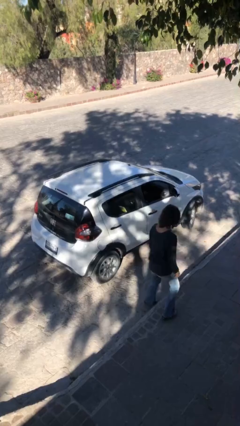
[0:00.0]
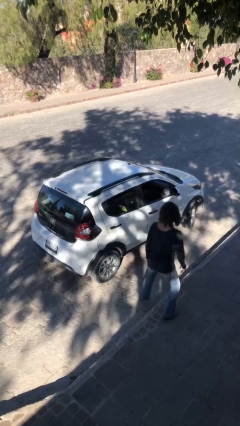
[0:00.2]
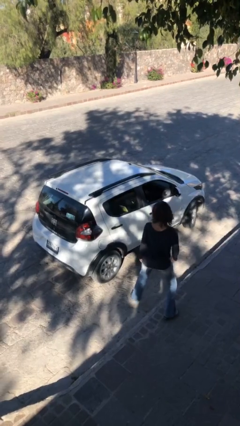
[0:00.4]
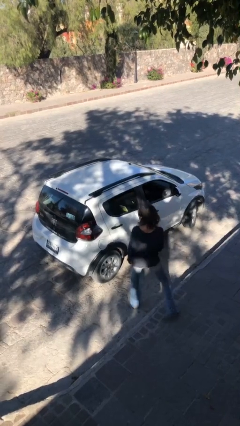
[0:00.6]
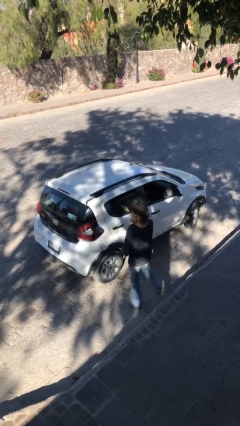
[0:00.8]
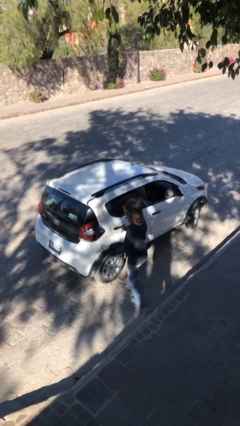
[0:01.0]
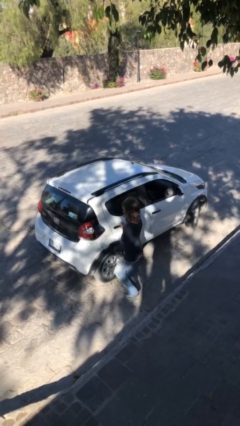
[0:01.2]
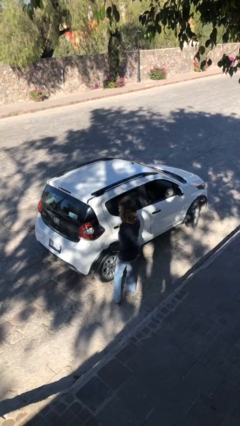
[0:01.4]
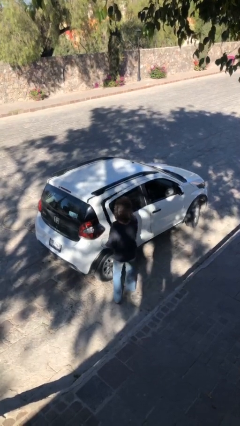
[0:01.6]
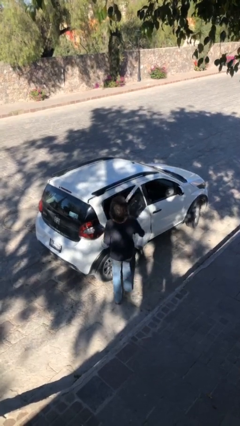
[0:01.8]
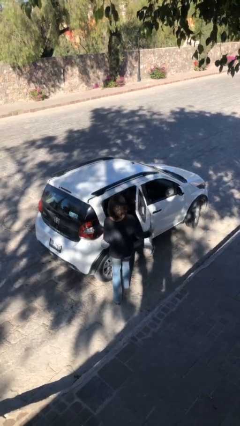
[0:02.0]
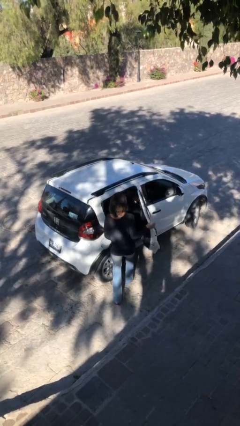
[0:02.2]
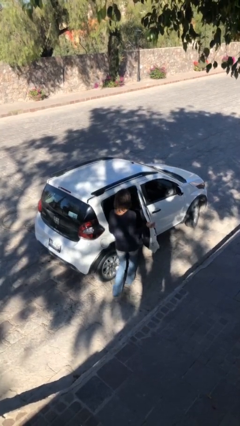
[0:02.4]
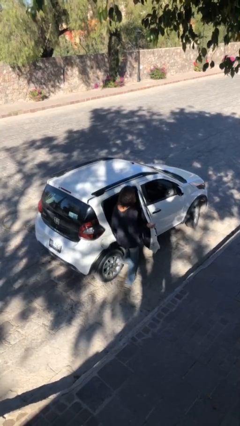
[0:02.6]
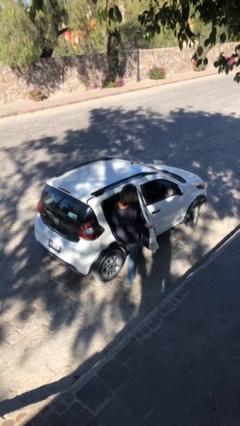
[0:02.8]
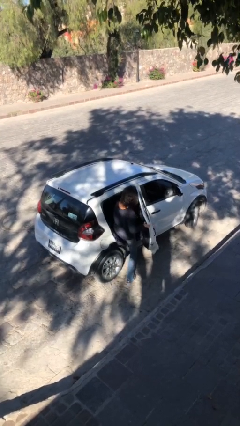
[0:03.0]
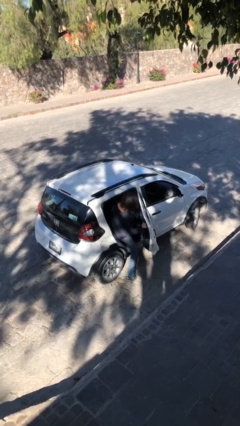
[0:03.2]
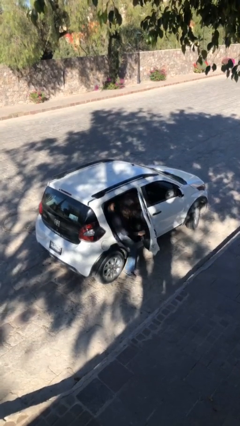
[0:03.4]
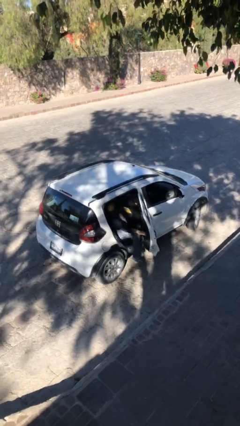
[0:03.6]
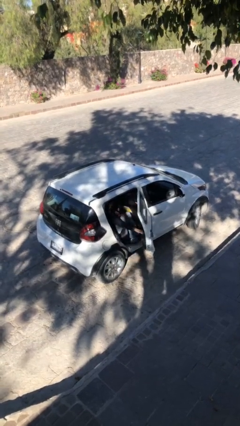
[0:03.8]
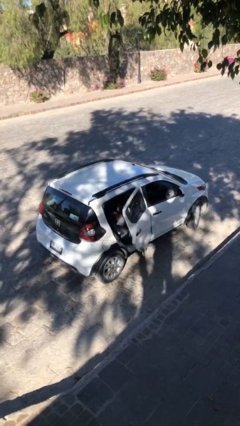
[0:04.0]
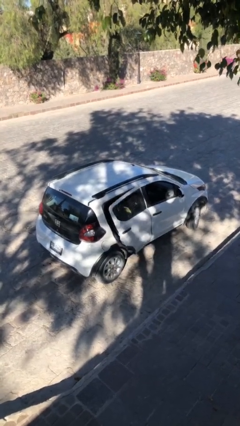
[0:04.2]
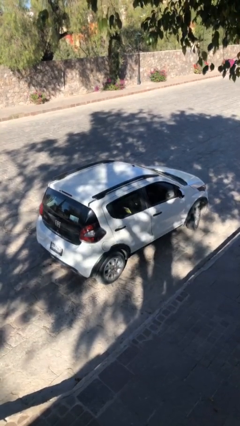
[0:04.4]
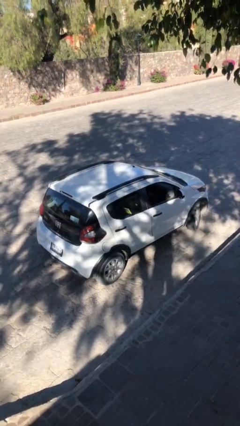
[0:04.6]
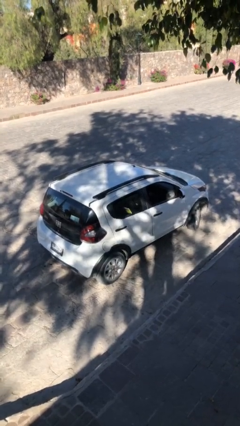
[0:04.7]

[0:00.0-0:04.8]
car picks up person

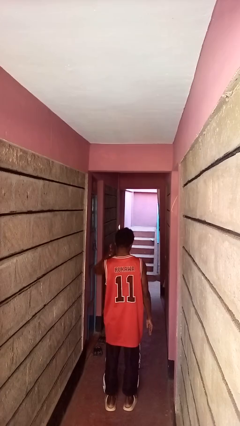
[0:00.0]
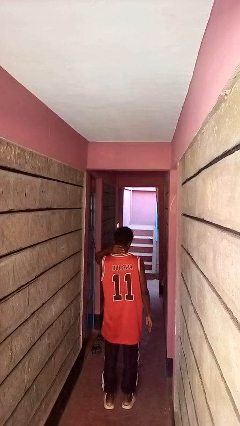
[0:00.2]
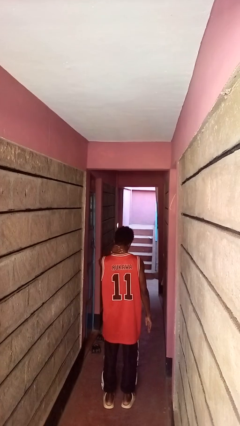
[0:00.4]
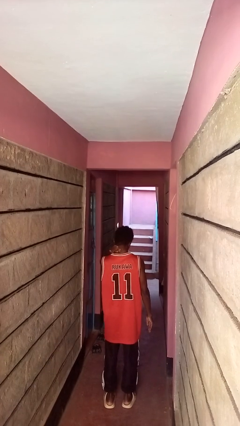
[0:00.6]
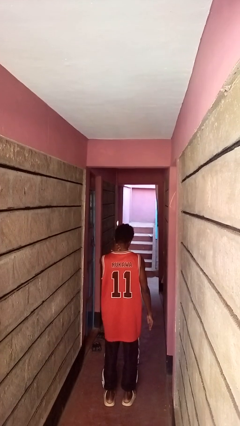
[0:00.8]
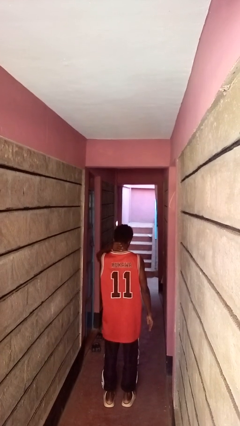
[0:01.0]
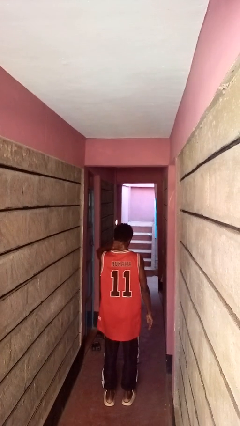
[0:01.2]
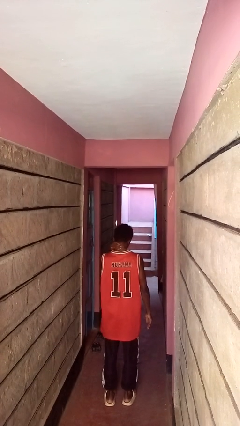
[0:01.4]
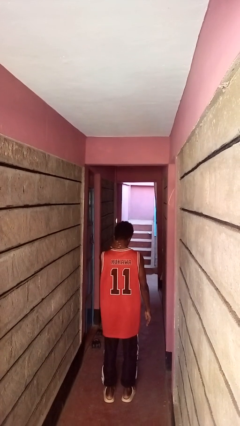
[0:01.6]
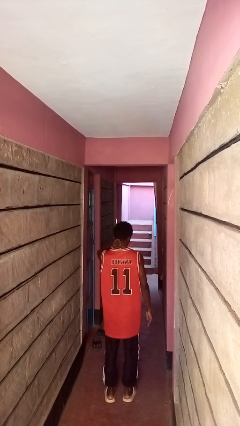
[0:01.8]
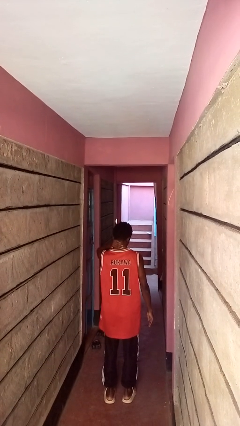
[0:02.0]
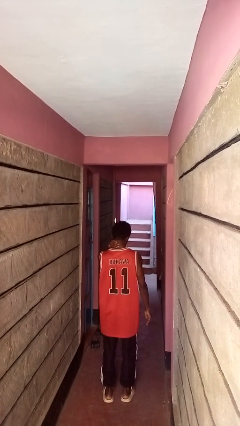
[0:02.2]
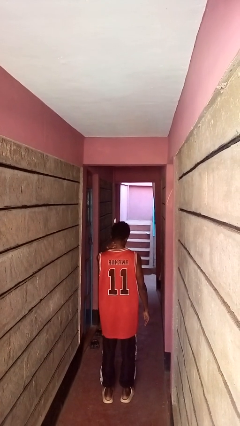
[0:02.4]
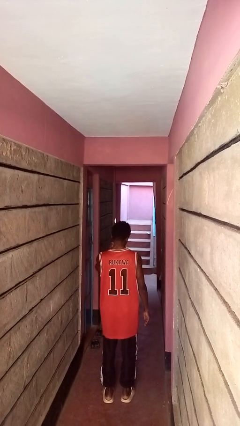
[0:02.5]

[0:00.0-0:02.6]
person rubs neck

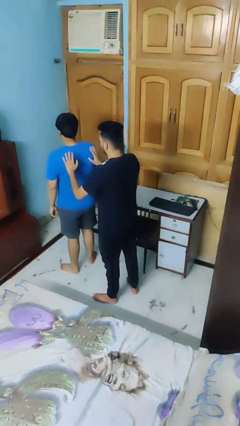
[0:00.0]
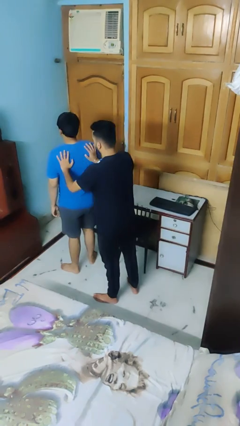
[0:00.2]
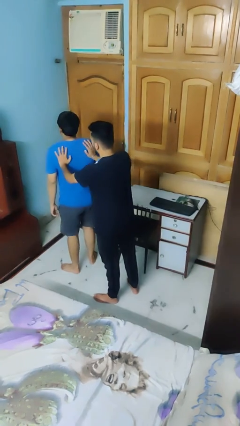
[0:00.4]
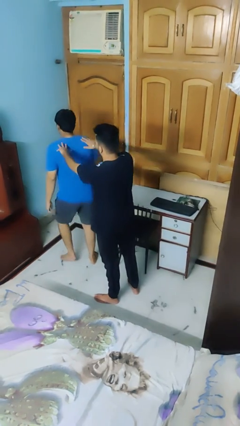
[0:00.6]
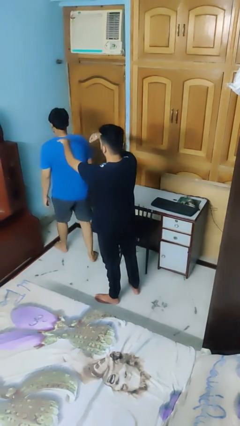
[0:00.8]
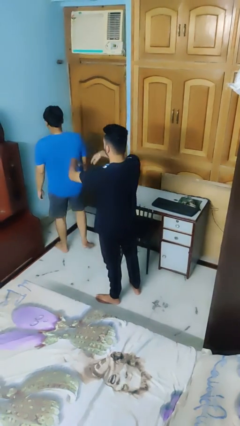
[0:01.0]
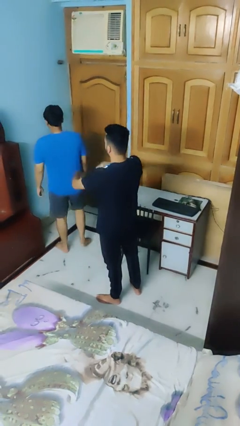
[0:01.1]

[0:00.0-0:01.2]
person shoves person

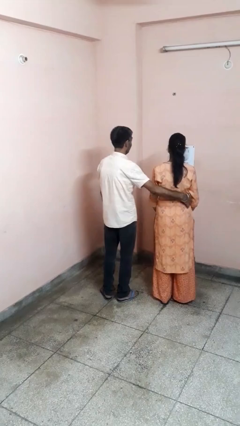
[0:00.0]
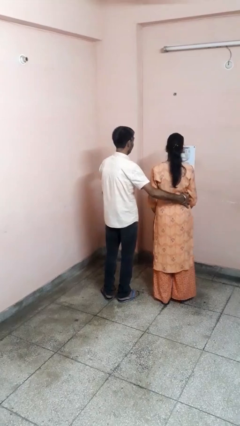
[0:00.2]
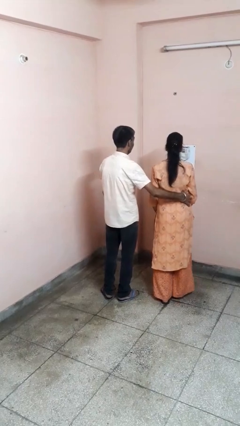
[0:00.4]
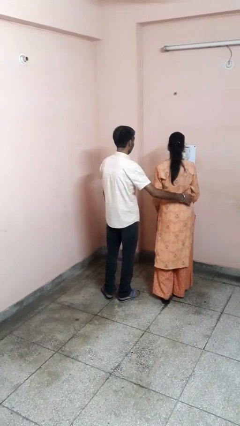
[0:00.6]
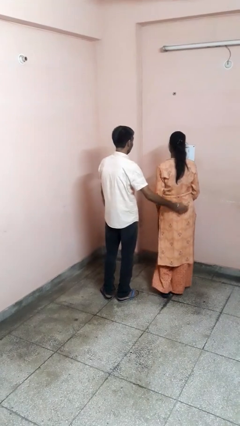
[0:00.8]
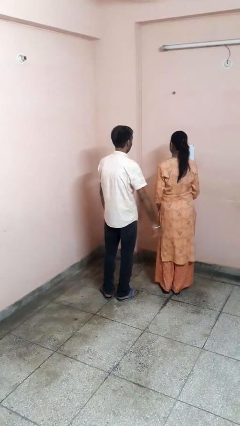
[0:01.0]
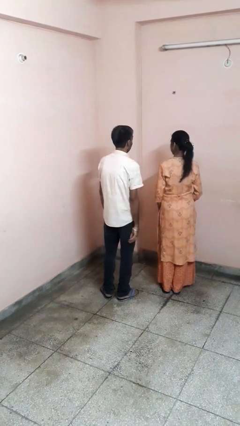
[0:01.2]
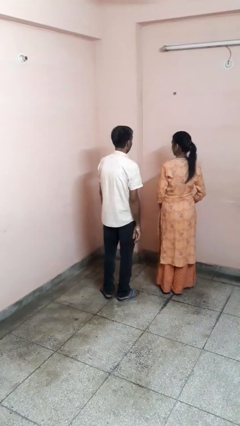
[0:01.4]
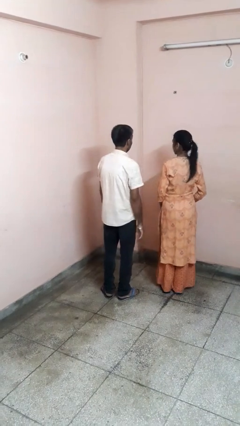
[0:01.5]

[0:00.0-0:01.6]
person tickles person

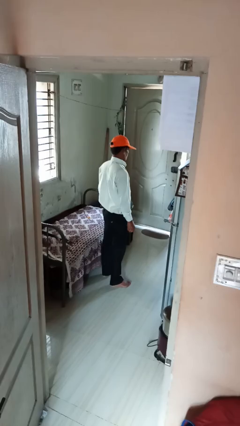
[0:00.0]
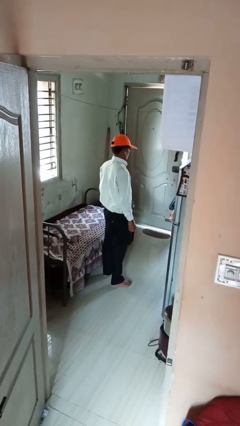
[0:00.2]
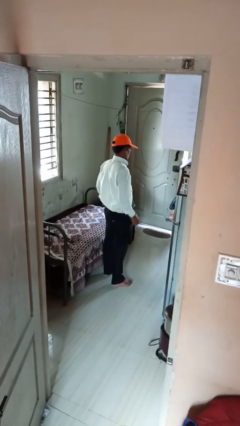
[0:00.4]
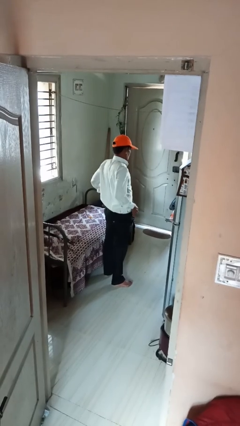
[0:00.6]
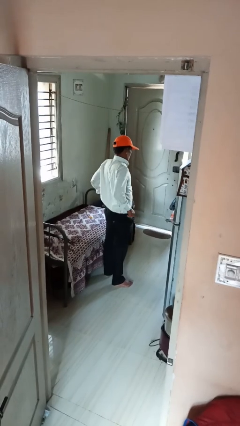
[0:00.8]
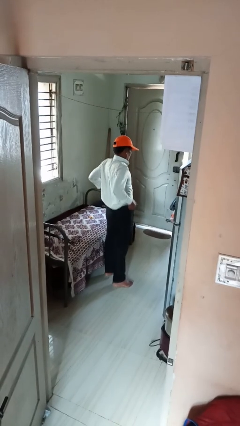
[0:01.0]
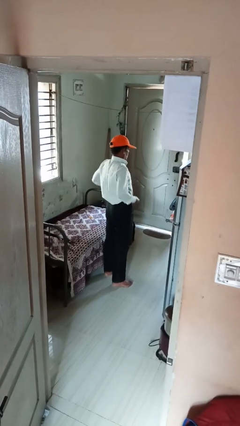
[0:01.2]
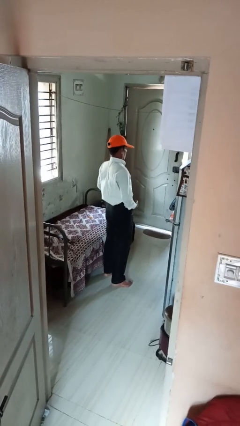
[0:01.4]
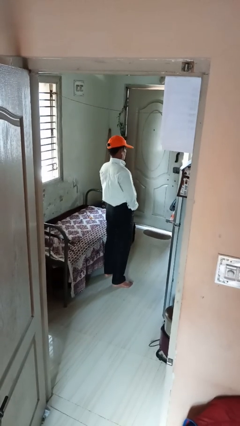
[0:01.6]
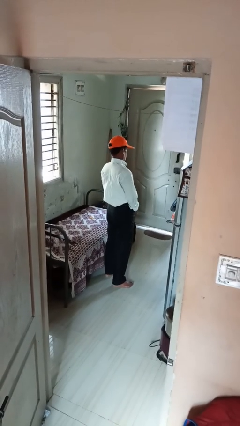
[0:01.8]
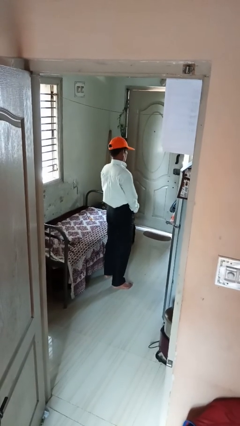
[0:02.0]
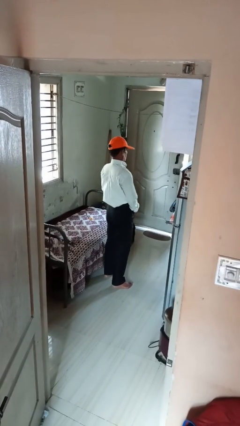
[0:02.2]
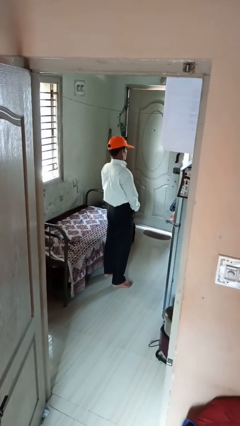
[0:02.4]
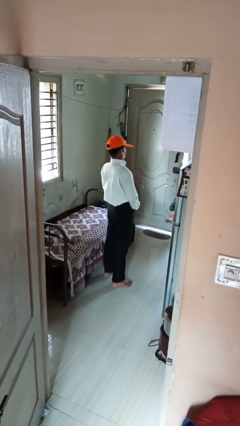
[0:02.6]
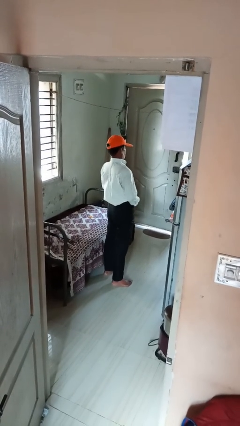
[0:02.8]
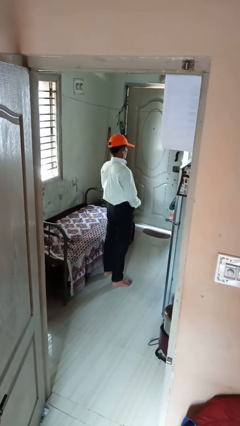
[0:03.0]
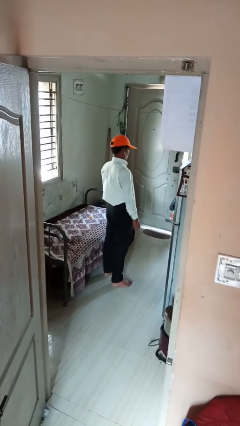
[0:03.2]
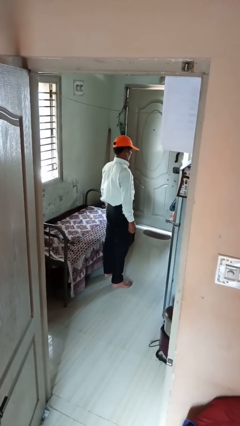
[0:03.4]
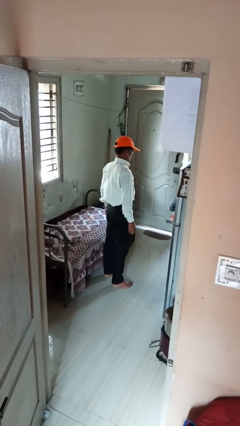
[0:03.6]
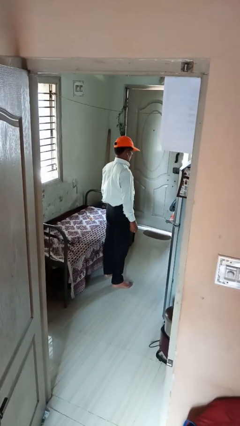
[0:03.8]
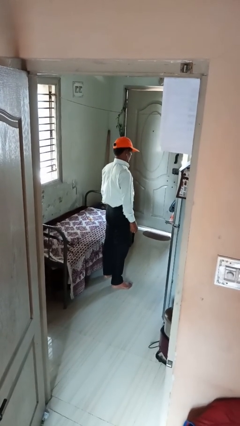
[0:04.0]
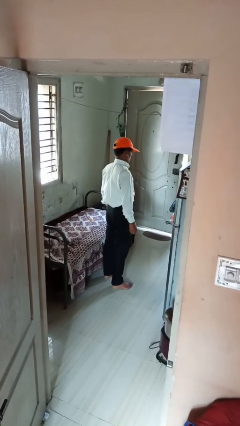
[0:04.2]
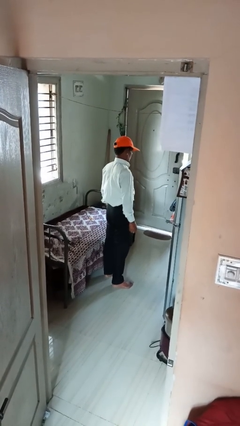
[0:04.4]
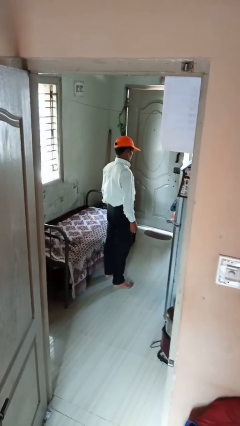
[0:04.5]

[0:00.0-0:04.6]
person hikes up pants

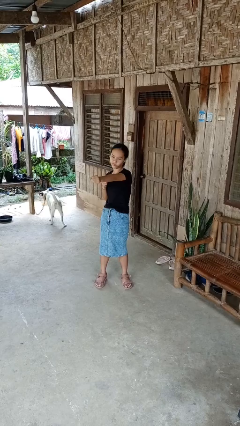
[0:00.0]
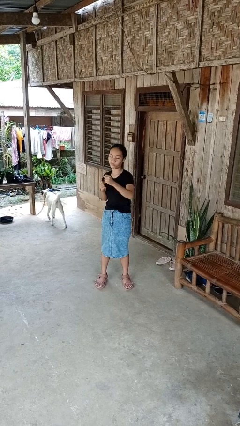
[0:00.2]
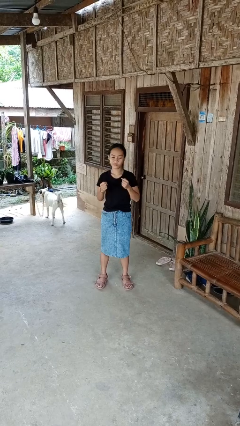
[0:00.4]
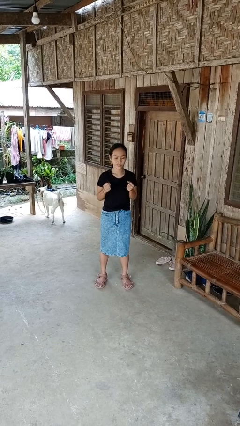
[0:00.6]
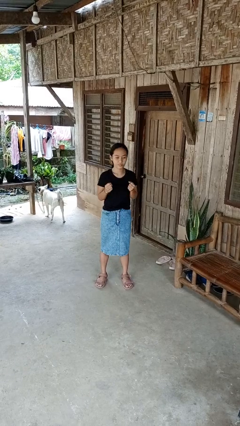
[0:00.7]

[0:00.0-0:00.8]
person punches

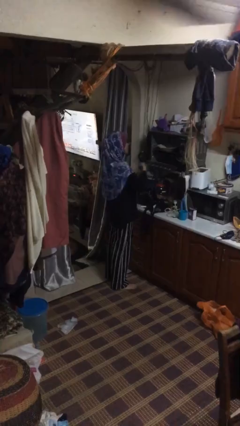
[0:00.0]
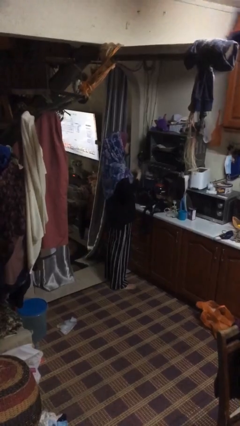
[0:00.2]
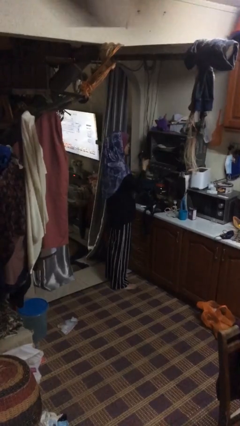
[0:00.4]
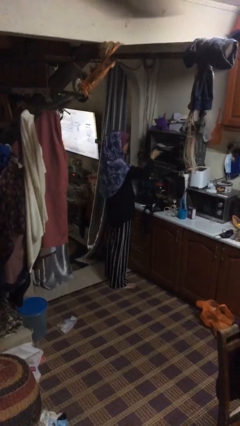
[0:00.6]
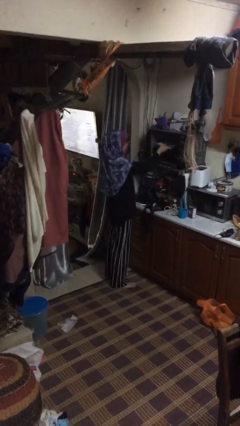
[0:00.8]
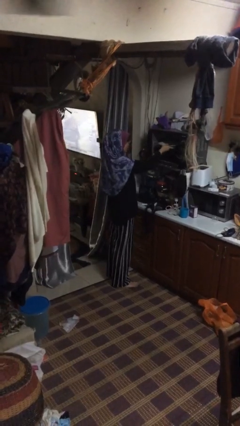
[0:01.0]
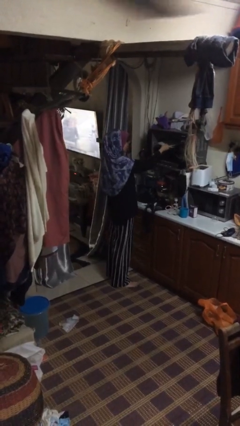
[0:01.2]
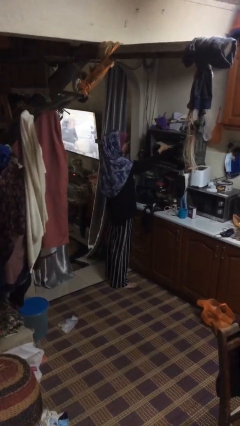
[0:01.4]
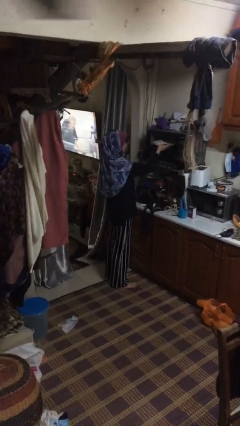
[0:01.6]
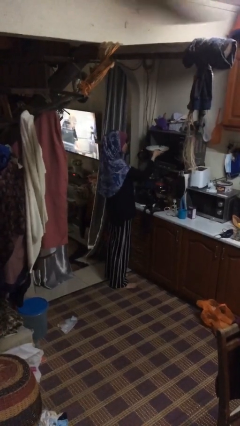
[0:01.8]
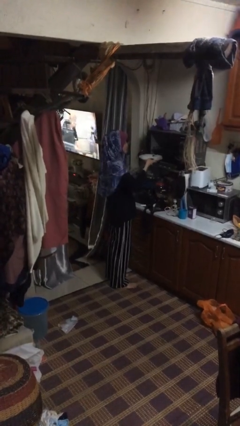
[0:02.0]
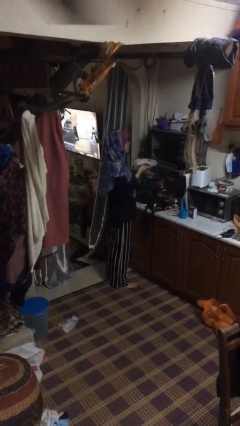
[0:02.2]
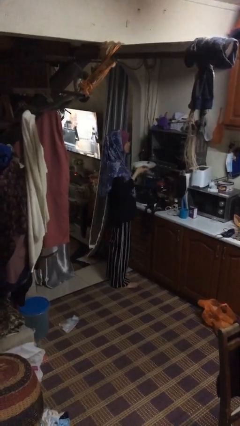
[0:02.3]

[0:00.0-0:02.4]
person takes object from oven
